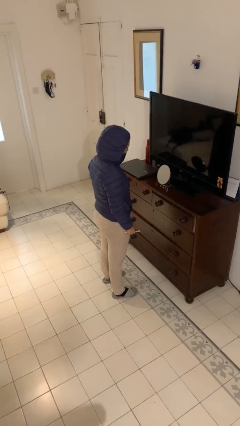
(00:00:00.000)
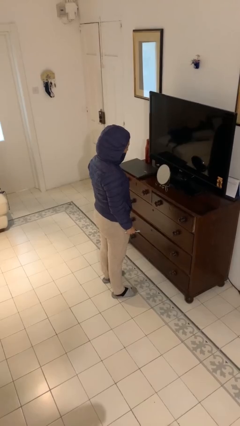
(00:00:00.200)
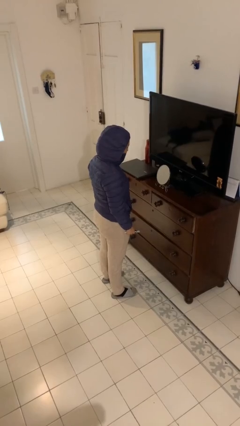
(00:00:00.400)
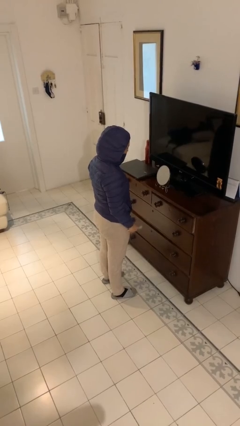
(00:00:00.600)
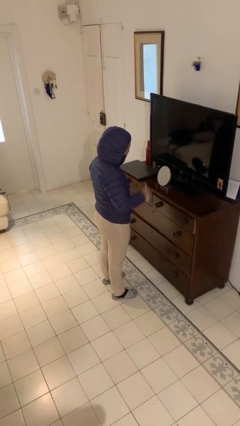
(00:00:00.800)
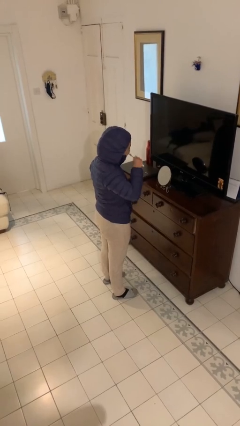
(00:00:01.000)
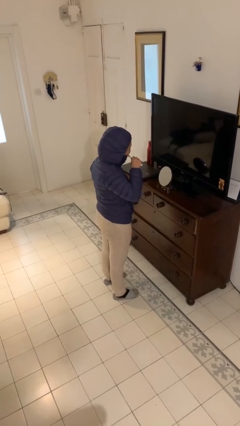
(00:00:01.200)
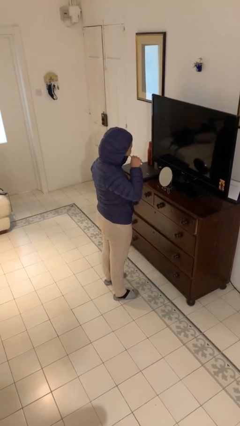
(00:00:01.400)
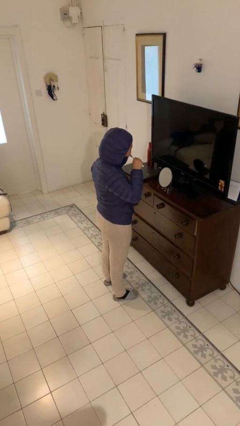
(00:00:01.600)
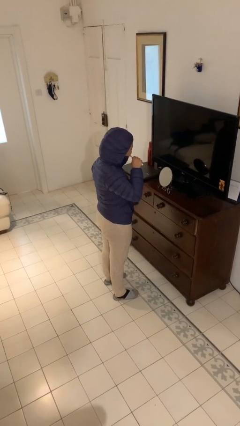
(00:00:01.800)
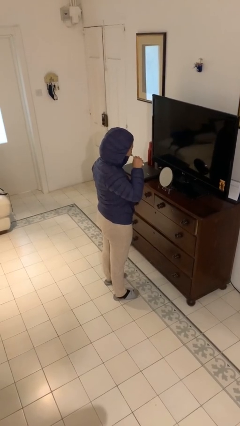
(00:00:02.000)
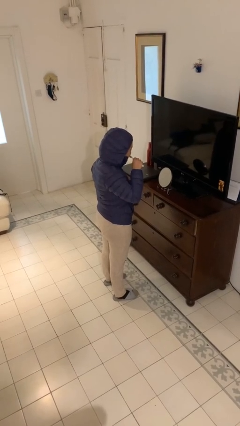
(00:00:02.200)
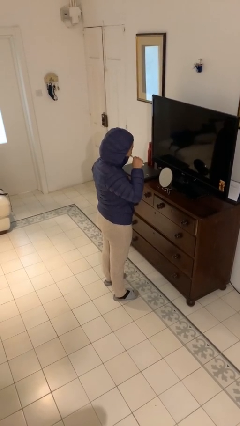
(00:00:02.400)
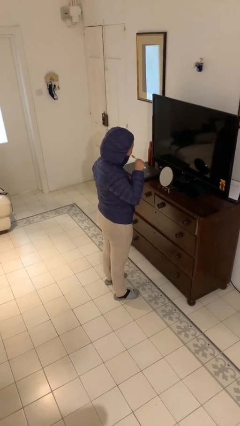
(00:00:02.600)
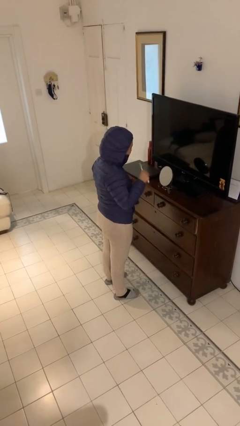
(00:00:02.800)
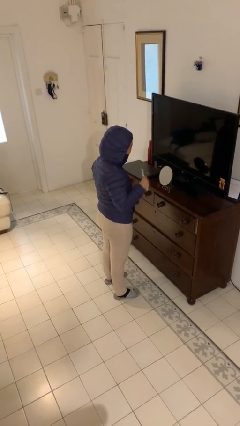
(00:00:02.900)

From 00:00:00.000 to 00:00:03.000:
person brushes teeth

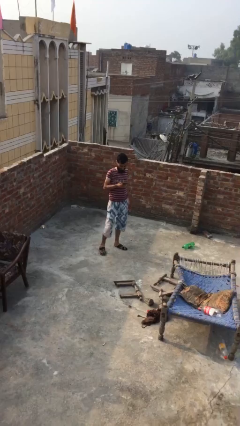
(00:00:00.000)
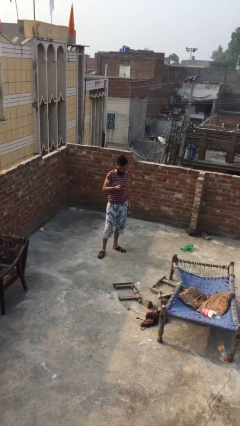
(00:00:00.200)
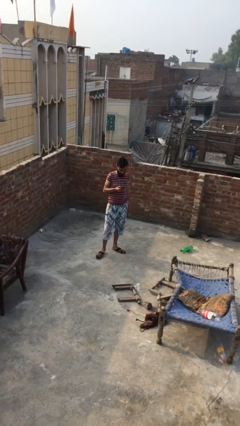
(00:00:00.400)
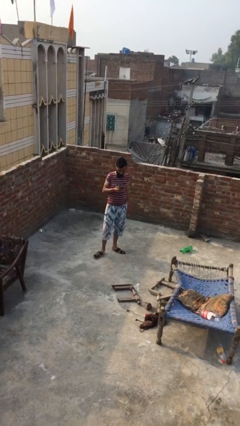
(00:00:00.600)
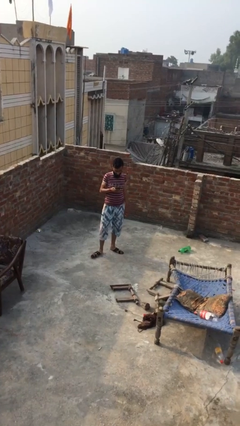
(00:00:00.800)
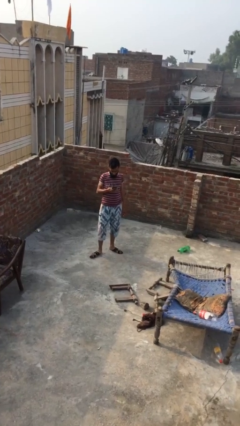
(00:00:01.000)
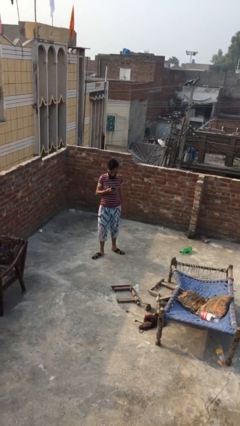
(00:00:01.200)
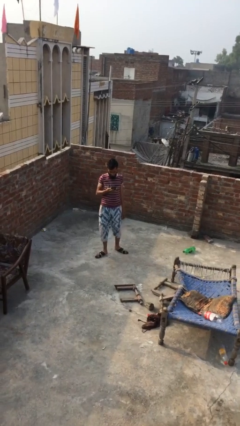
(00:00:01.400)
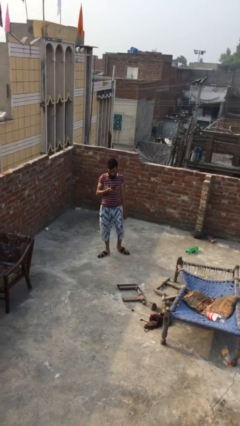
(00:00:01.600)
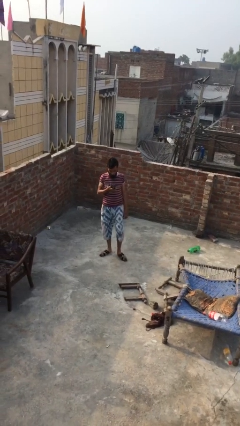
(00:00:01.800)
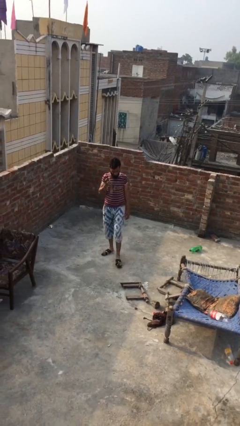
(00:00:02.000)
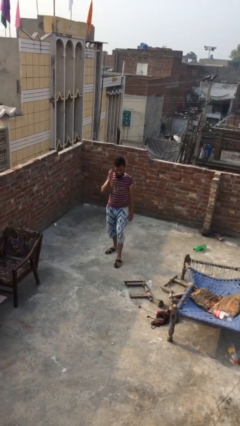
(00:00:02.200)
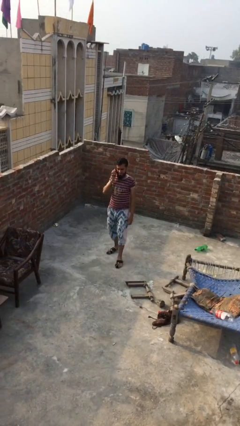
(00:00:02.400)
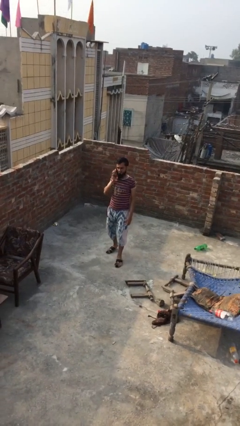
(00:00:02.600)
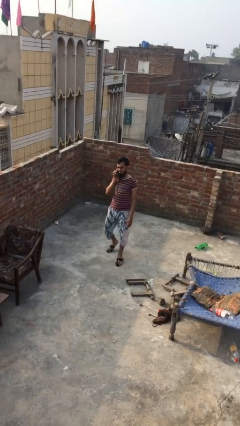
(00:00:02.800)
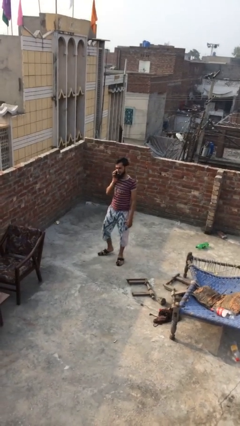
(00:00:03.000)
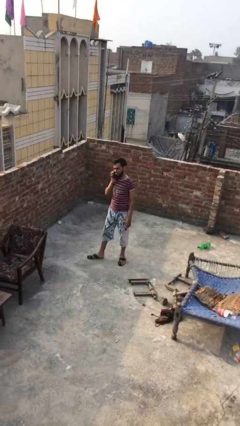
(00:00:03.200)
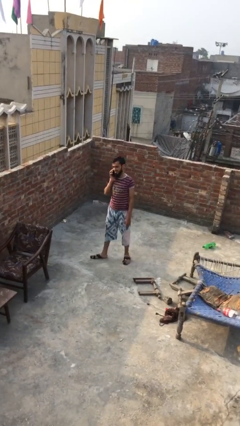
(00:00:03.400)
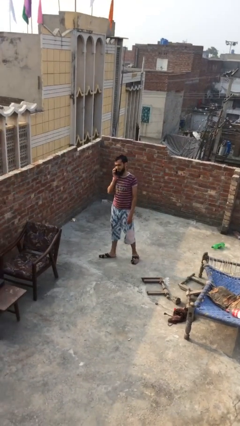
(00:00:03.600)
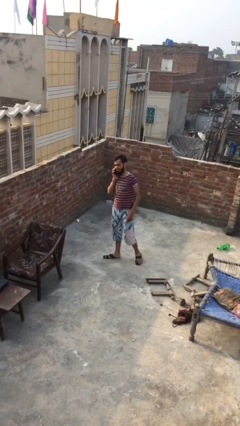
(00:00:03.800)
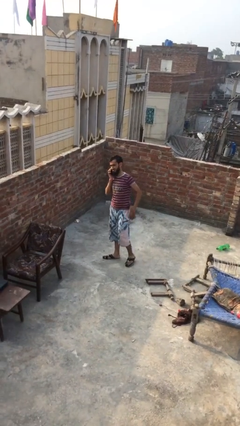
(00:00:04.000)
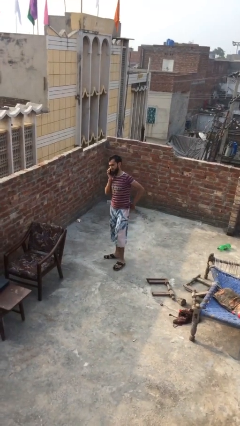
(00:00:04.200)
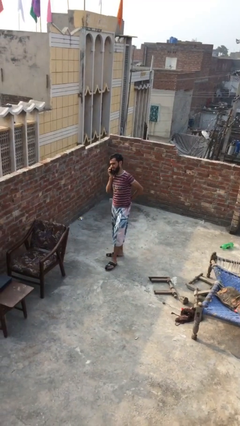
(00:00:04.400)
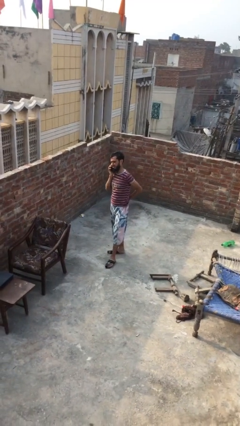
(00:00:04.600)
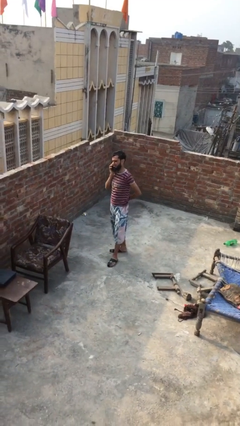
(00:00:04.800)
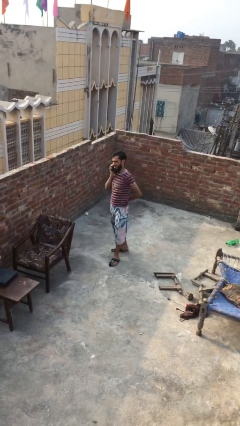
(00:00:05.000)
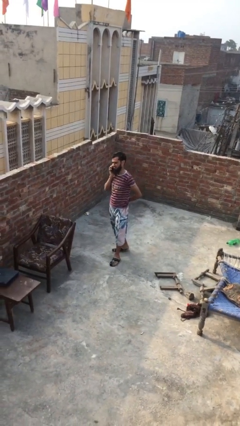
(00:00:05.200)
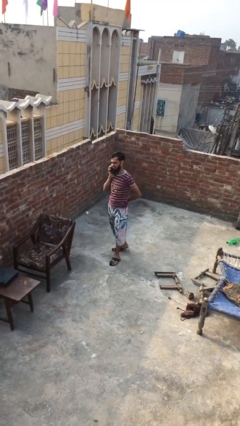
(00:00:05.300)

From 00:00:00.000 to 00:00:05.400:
person talks on phone

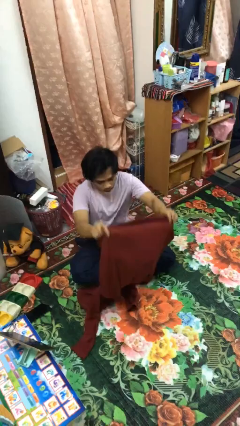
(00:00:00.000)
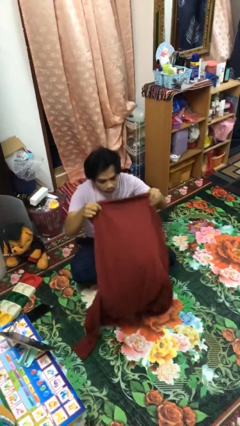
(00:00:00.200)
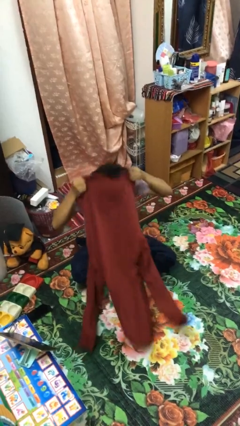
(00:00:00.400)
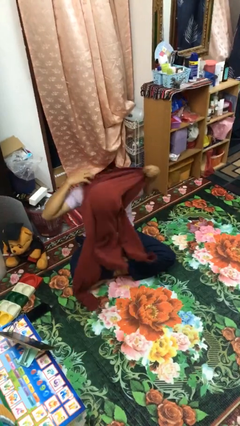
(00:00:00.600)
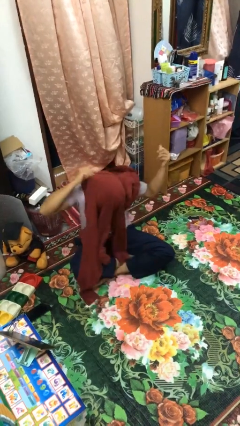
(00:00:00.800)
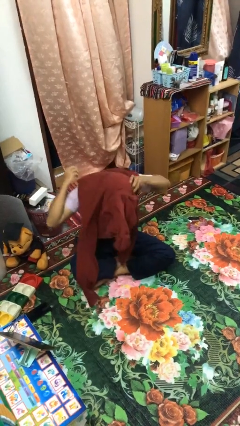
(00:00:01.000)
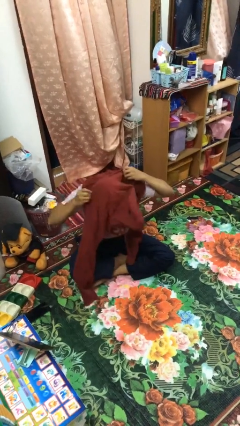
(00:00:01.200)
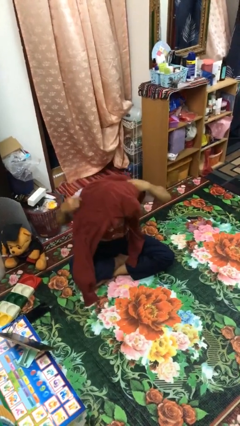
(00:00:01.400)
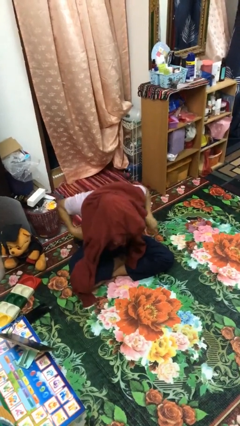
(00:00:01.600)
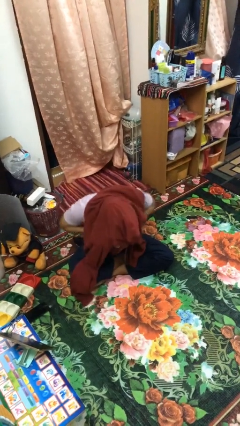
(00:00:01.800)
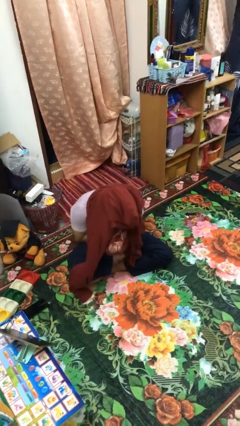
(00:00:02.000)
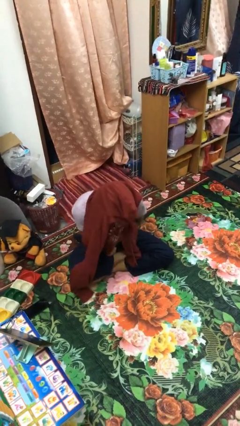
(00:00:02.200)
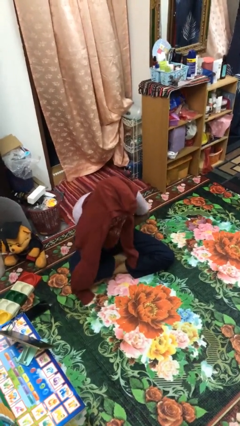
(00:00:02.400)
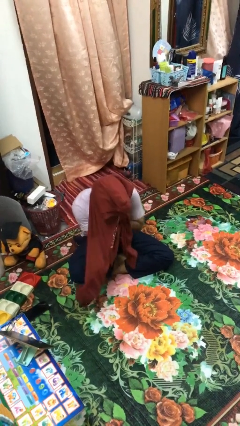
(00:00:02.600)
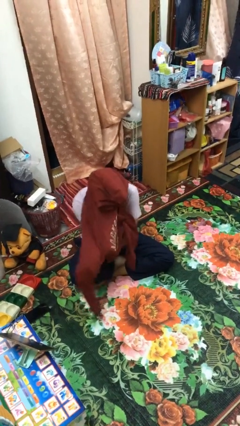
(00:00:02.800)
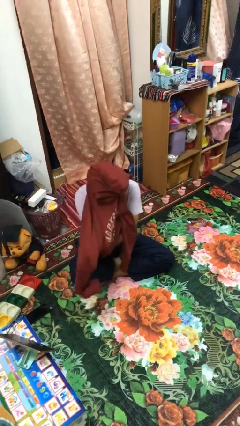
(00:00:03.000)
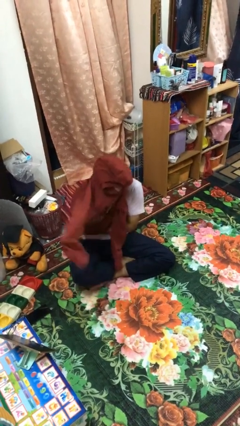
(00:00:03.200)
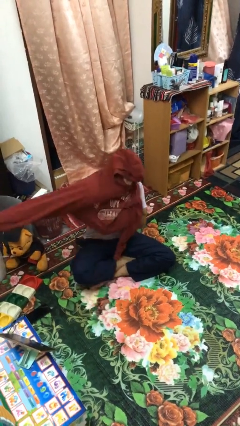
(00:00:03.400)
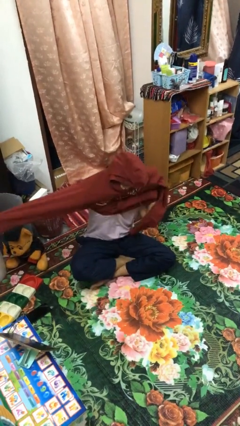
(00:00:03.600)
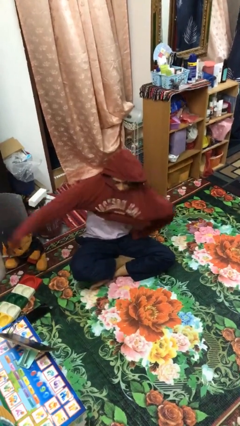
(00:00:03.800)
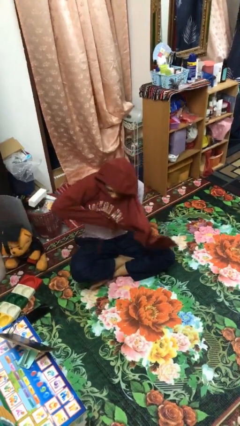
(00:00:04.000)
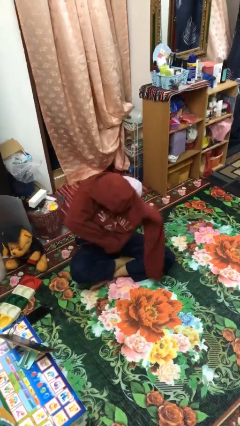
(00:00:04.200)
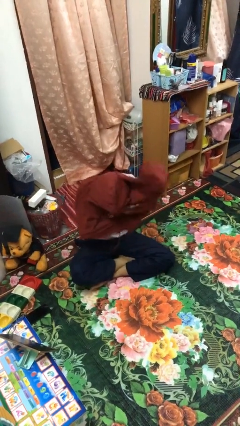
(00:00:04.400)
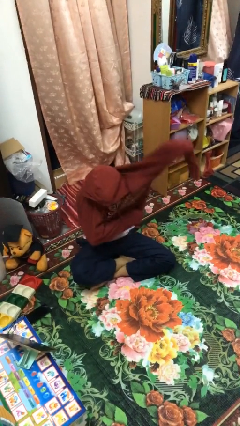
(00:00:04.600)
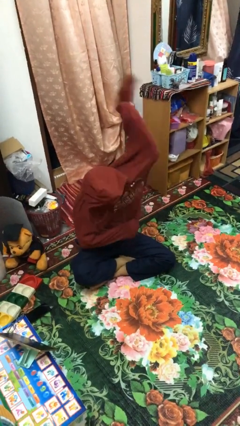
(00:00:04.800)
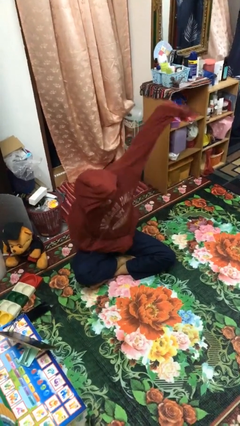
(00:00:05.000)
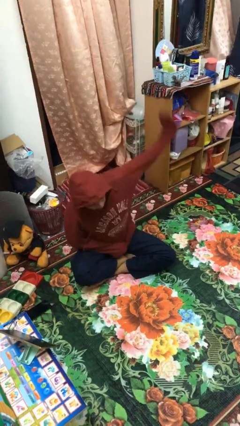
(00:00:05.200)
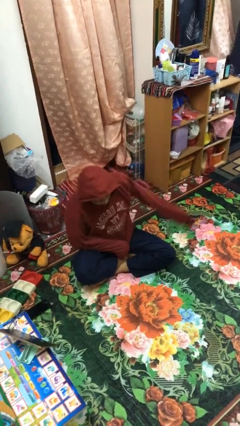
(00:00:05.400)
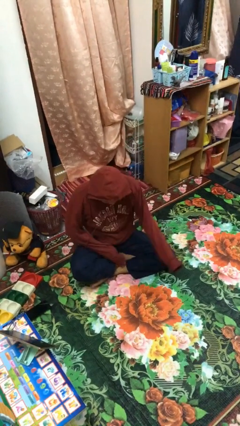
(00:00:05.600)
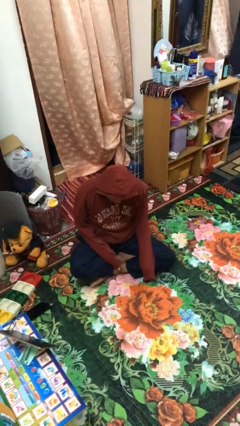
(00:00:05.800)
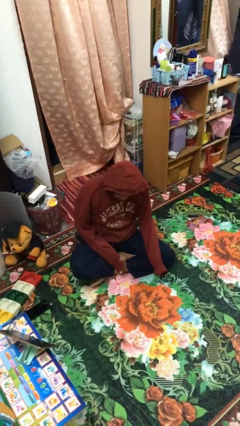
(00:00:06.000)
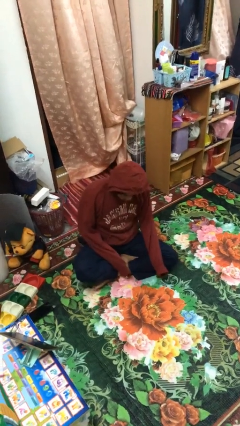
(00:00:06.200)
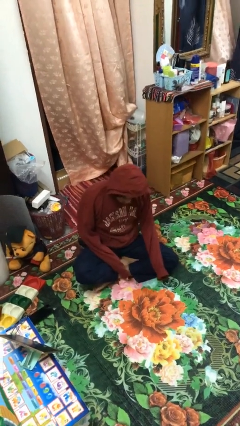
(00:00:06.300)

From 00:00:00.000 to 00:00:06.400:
person puts on hoodie

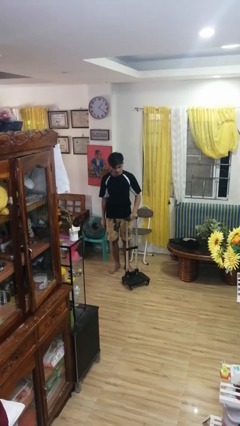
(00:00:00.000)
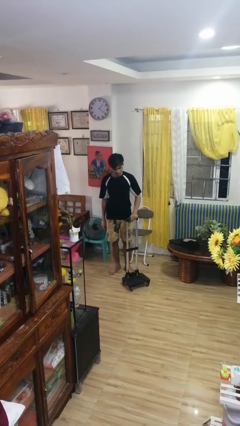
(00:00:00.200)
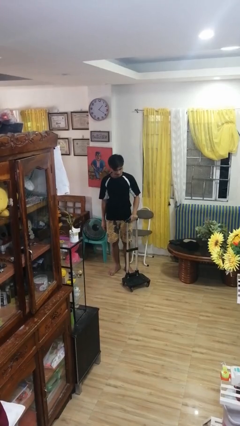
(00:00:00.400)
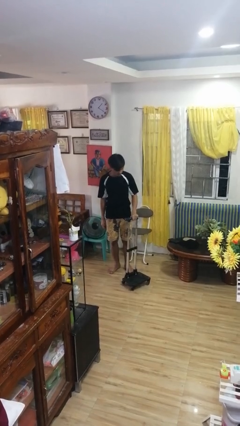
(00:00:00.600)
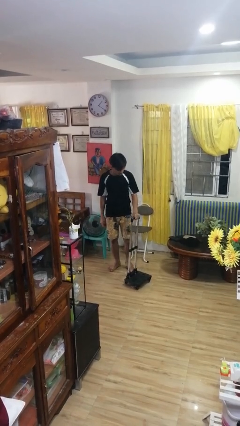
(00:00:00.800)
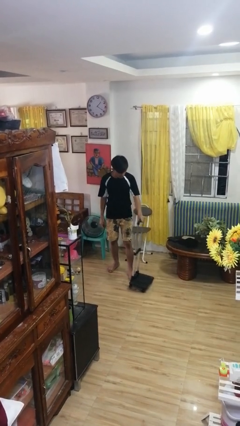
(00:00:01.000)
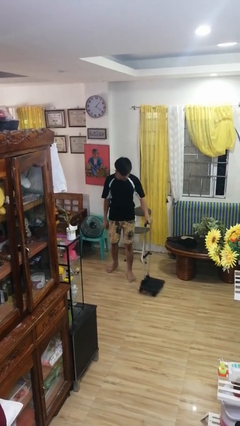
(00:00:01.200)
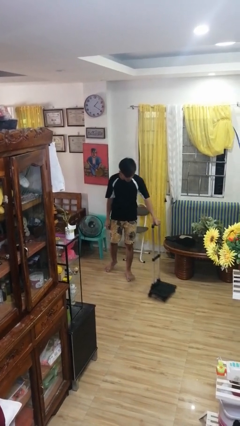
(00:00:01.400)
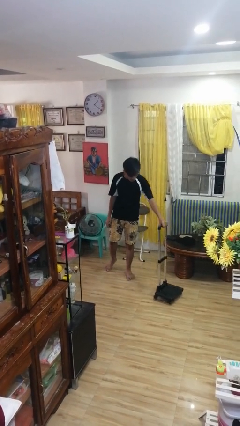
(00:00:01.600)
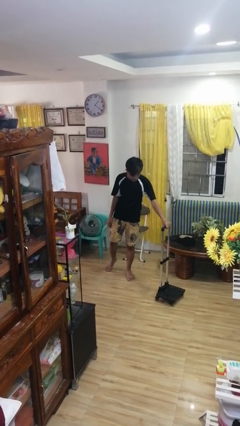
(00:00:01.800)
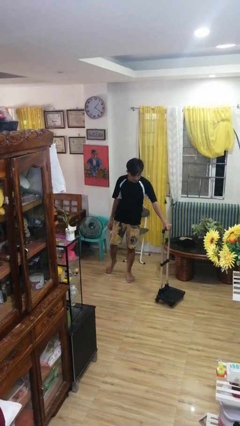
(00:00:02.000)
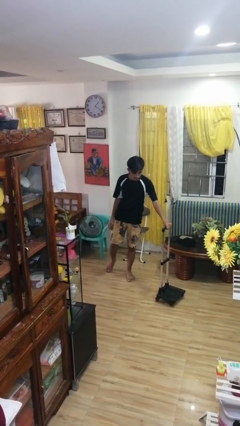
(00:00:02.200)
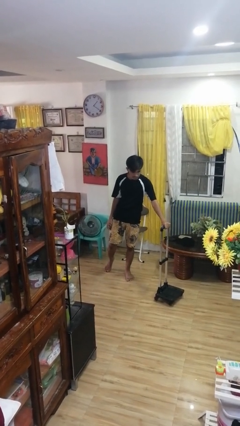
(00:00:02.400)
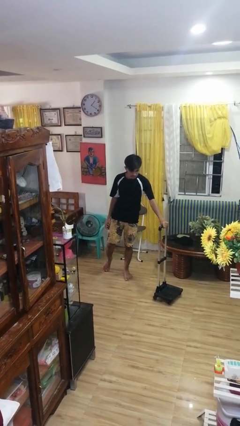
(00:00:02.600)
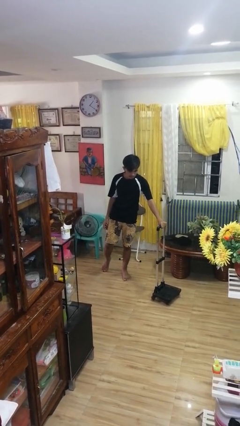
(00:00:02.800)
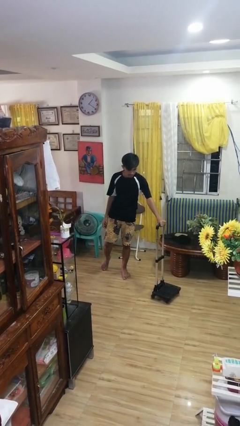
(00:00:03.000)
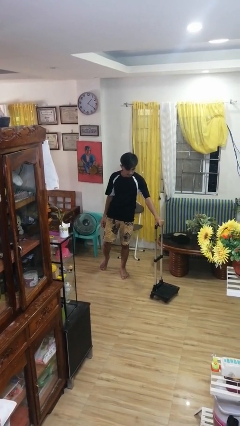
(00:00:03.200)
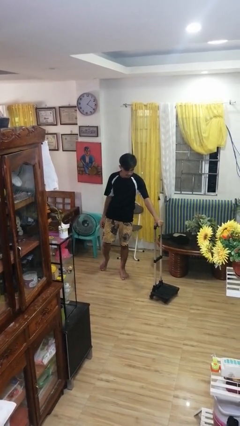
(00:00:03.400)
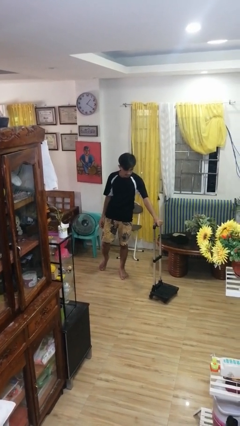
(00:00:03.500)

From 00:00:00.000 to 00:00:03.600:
person pushes wheeled cart
